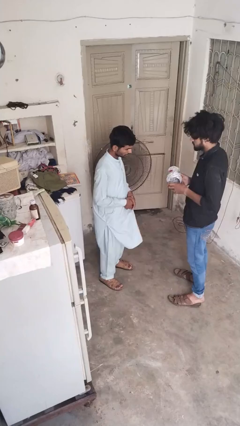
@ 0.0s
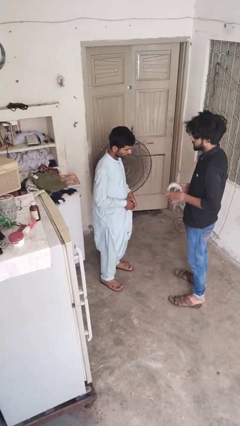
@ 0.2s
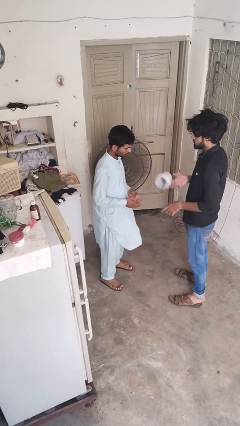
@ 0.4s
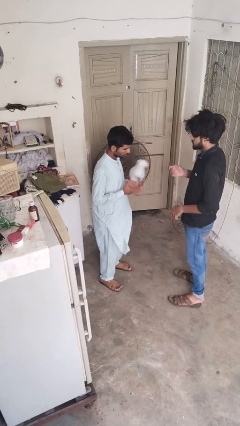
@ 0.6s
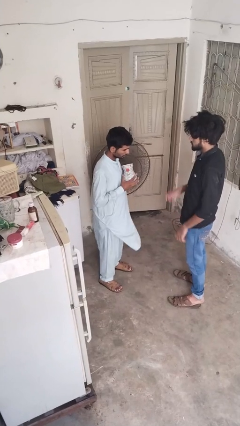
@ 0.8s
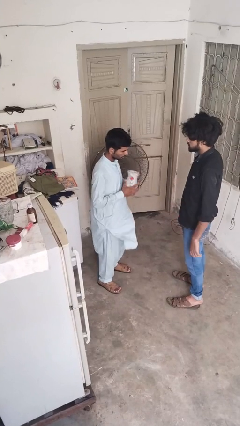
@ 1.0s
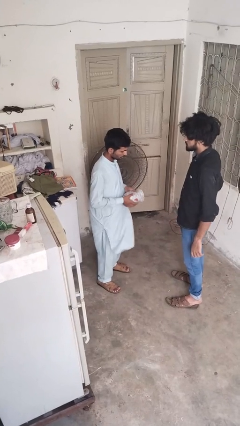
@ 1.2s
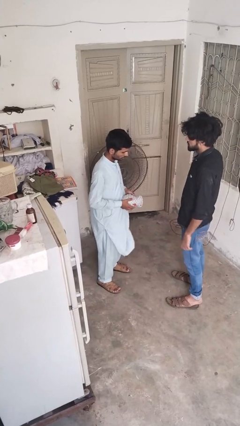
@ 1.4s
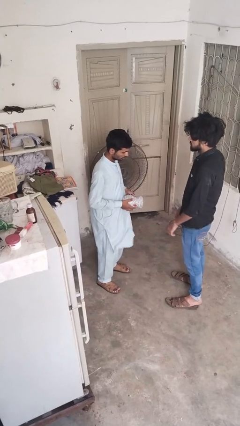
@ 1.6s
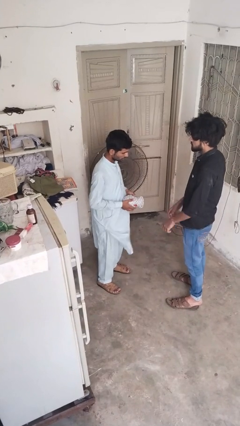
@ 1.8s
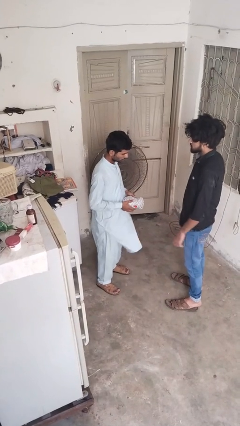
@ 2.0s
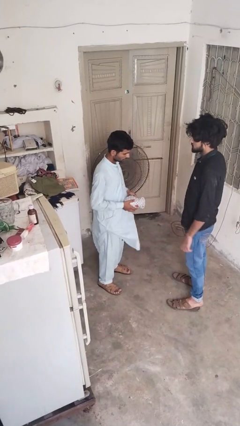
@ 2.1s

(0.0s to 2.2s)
person catches object from person

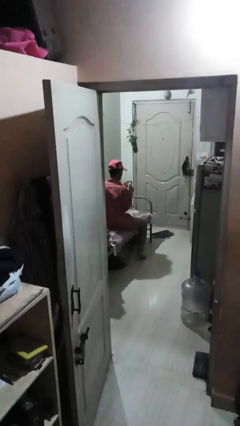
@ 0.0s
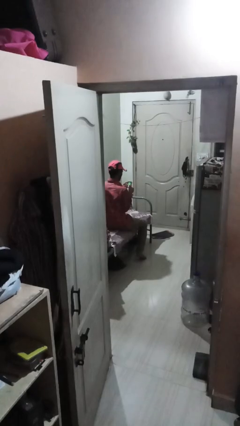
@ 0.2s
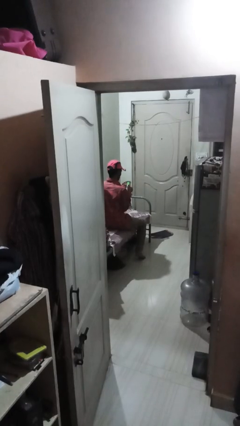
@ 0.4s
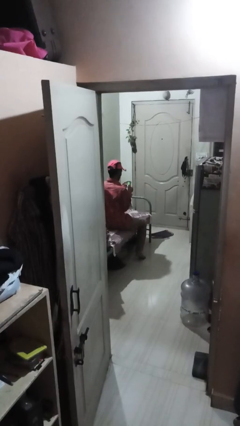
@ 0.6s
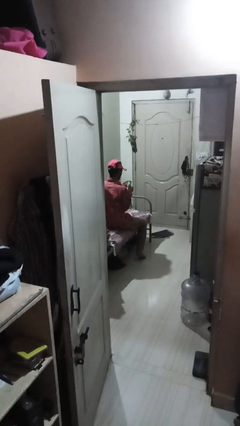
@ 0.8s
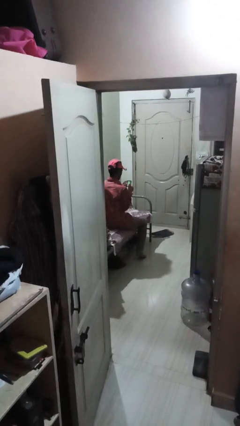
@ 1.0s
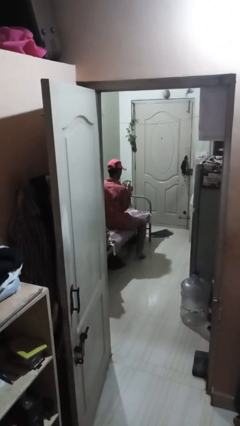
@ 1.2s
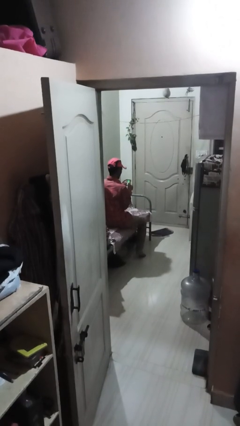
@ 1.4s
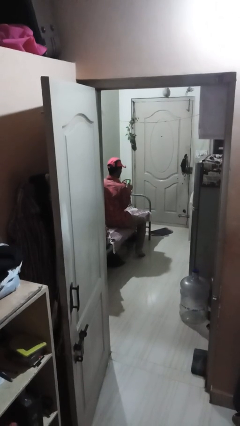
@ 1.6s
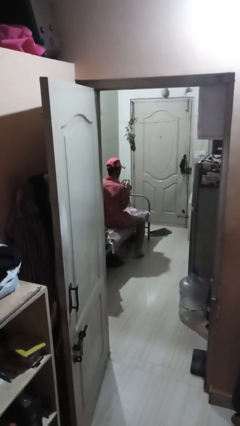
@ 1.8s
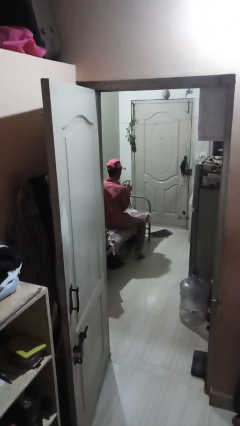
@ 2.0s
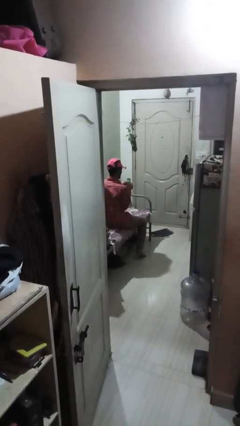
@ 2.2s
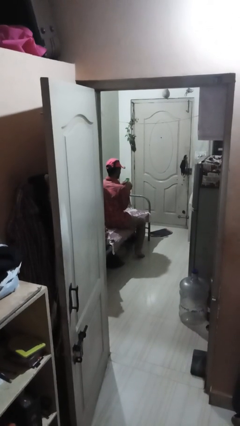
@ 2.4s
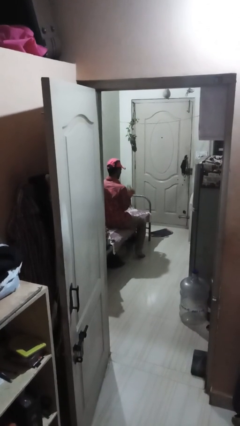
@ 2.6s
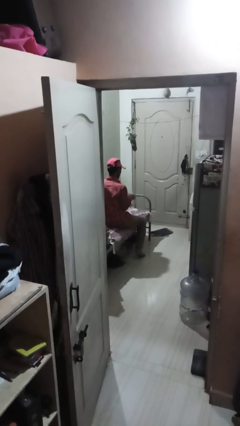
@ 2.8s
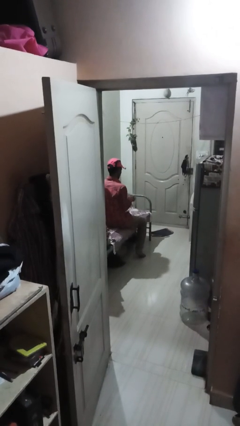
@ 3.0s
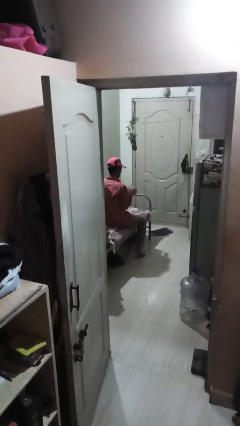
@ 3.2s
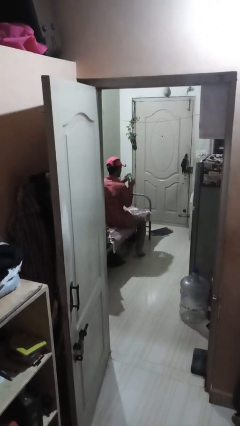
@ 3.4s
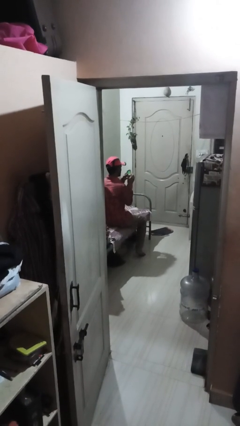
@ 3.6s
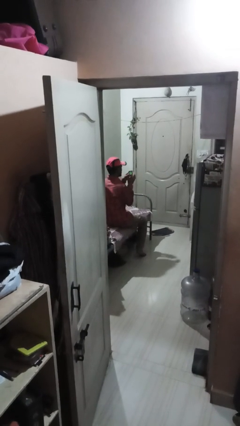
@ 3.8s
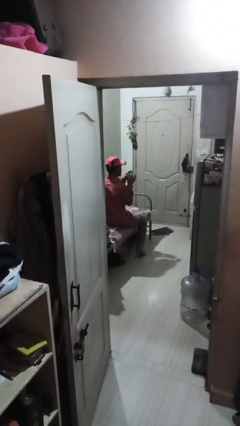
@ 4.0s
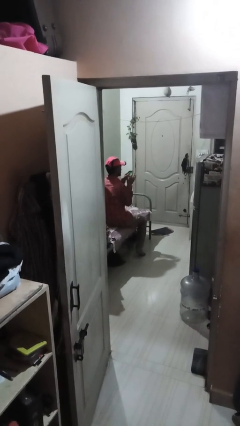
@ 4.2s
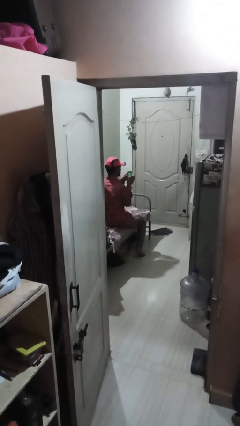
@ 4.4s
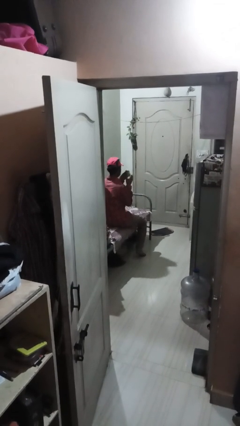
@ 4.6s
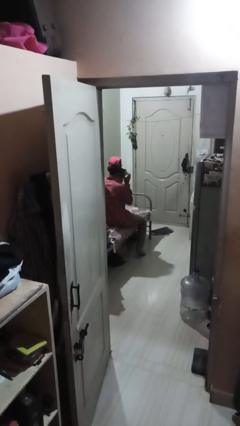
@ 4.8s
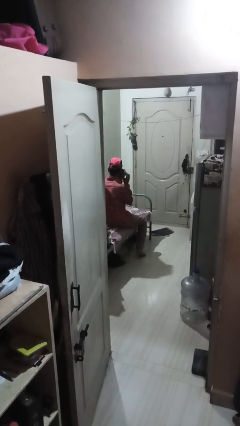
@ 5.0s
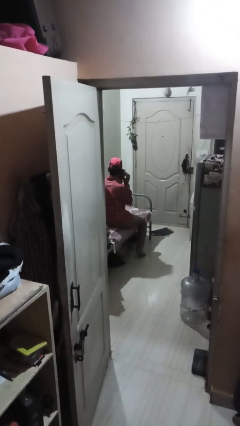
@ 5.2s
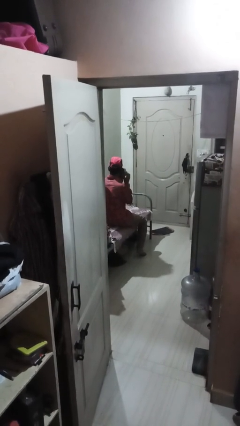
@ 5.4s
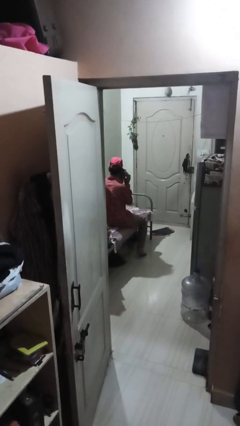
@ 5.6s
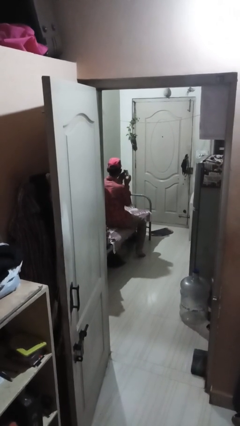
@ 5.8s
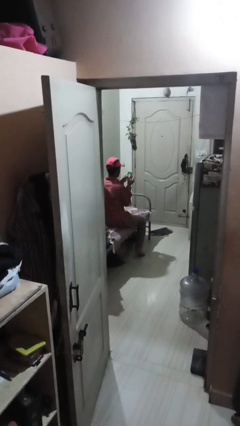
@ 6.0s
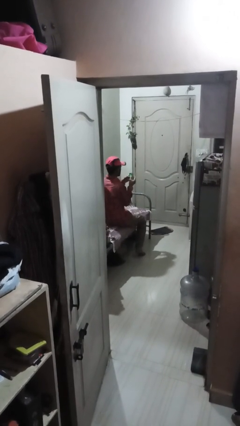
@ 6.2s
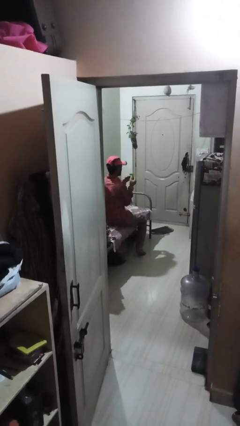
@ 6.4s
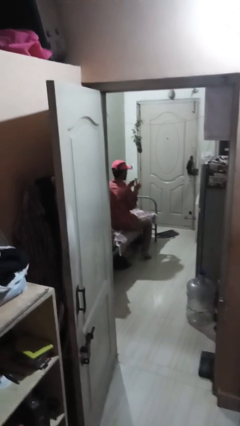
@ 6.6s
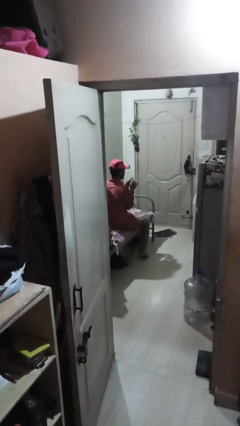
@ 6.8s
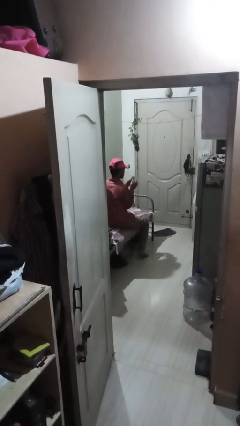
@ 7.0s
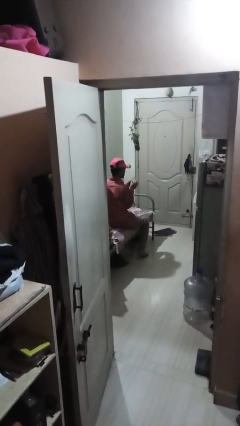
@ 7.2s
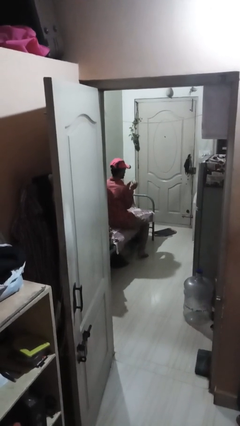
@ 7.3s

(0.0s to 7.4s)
person taps object with finger

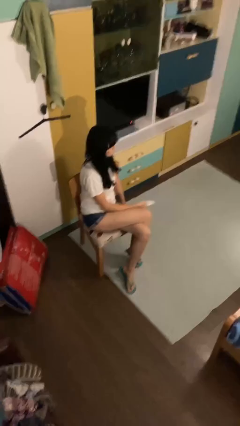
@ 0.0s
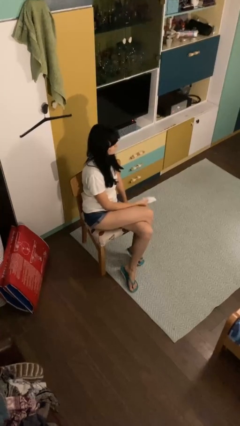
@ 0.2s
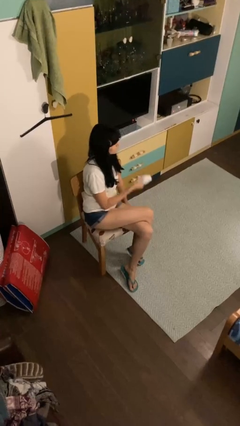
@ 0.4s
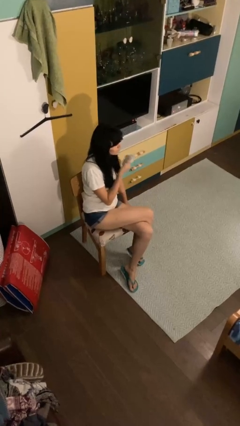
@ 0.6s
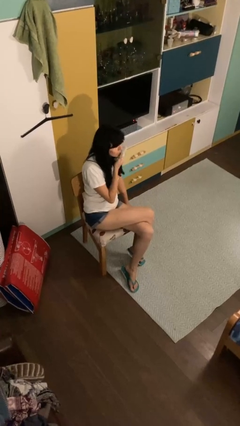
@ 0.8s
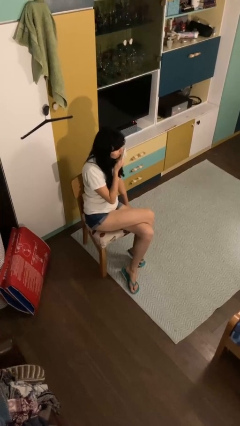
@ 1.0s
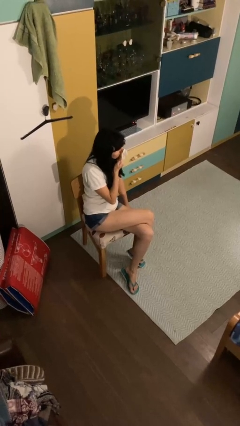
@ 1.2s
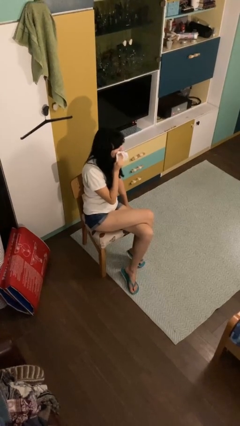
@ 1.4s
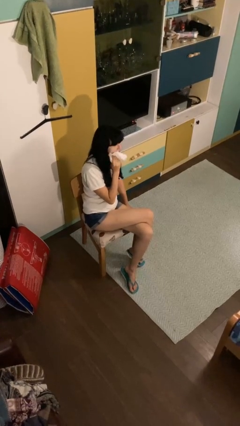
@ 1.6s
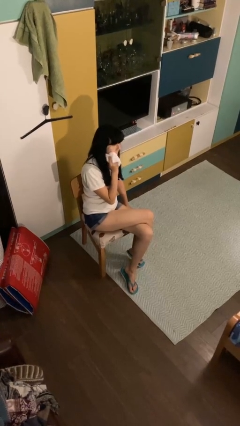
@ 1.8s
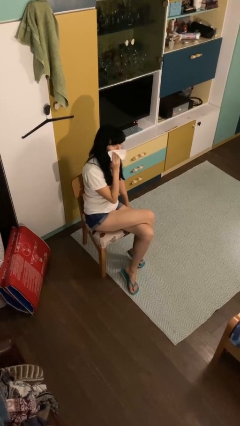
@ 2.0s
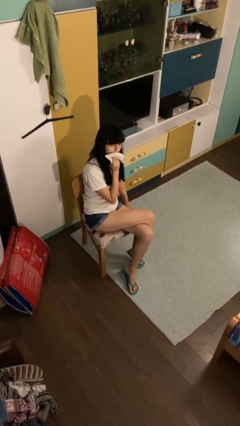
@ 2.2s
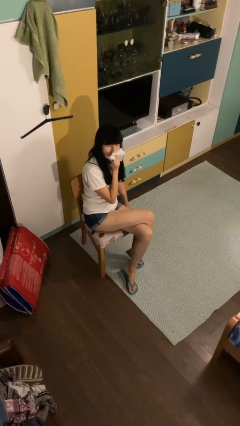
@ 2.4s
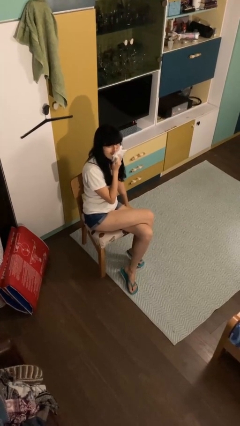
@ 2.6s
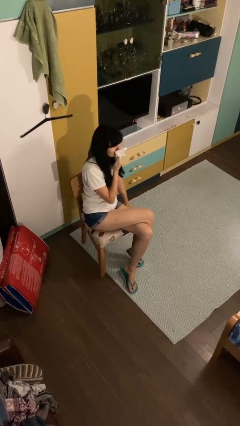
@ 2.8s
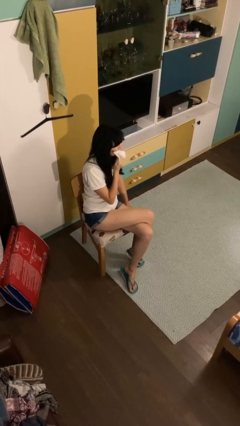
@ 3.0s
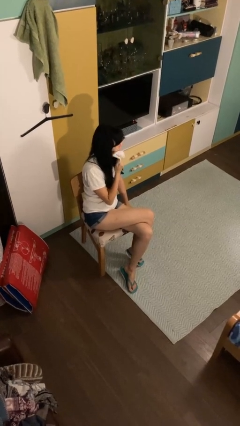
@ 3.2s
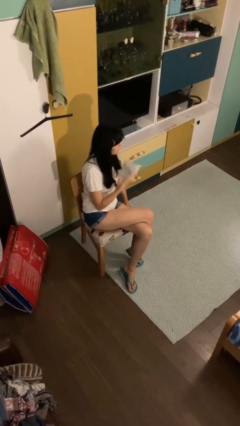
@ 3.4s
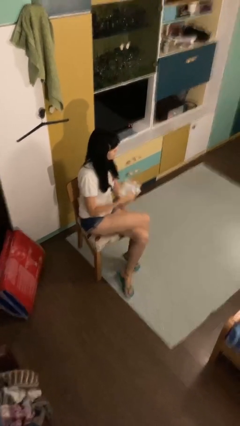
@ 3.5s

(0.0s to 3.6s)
person wipes mouth with napkin

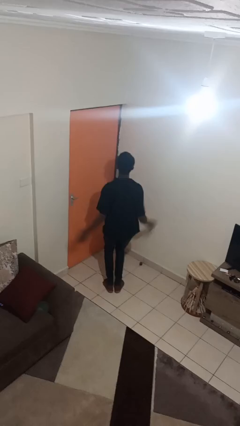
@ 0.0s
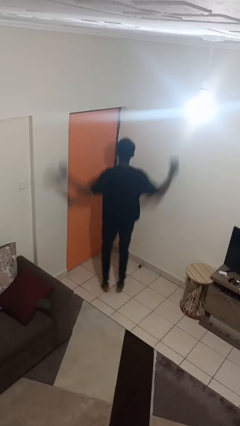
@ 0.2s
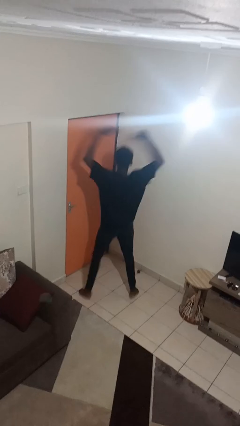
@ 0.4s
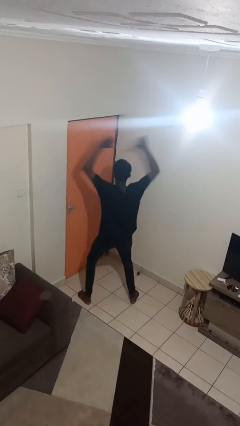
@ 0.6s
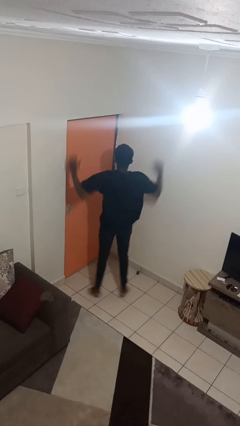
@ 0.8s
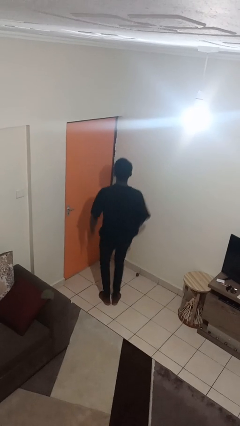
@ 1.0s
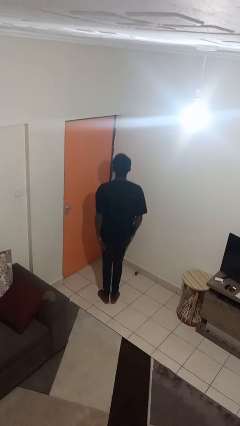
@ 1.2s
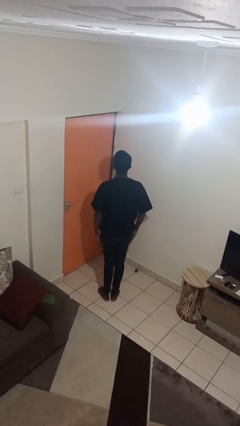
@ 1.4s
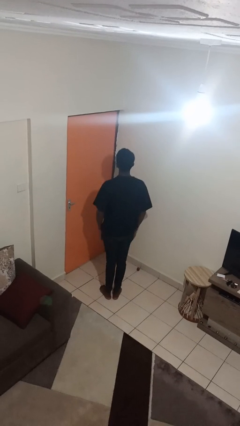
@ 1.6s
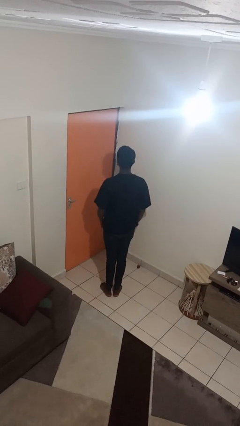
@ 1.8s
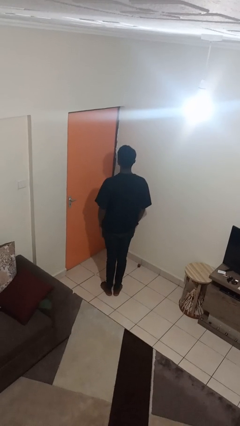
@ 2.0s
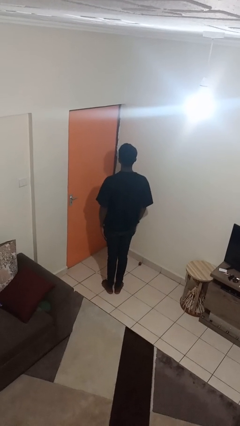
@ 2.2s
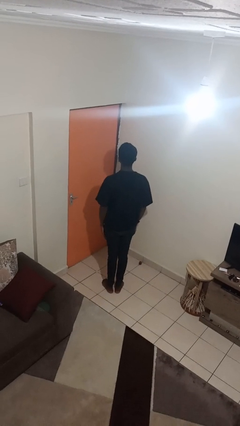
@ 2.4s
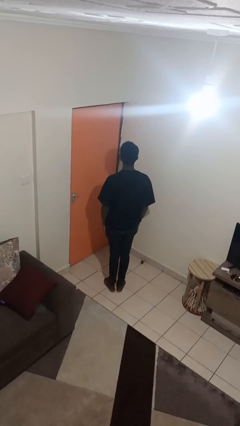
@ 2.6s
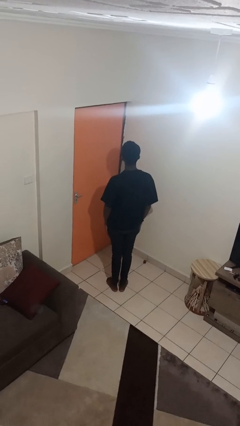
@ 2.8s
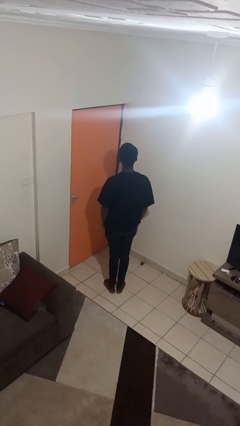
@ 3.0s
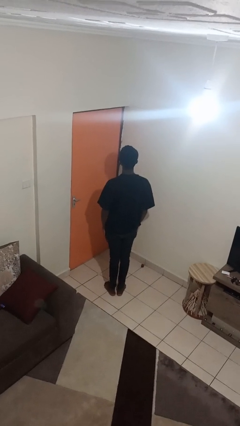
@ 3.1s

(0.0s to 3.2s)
person exercises with jumping jacks

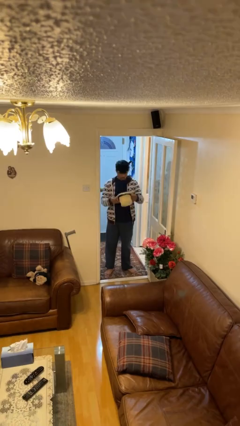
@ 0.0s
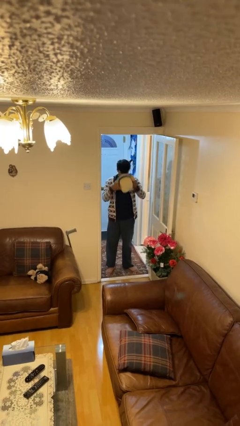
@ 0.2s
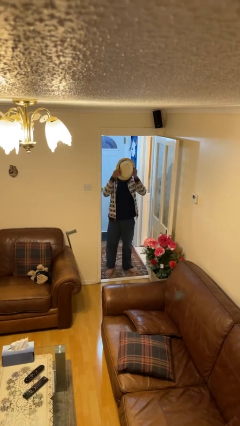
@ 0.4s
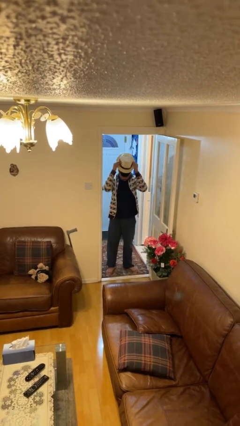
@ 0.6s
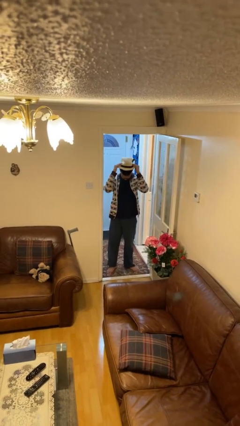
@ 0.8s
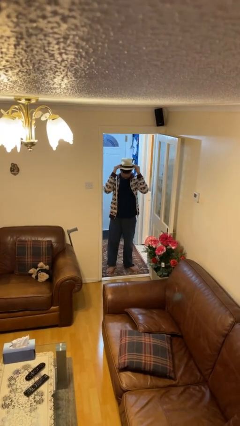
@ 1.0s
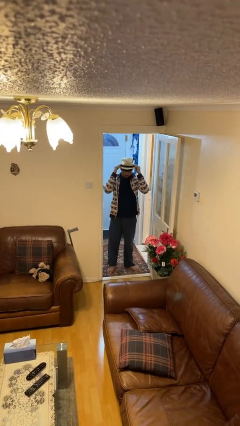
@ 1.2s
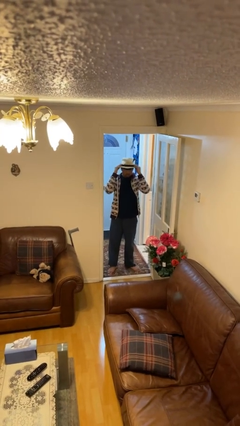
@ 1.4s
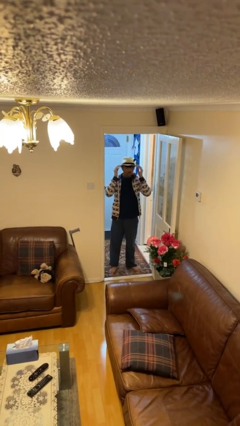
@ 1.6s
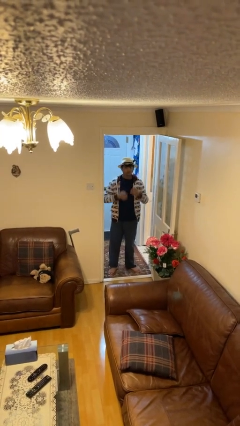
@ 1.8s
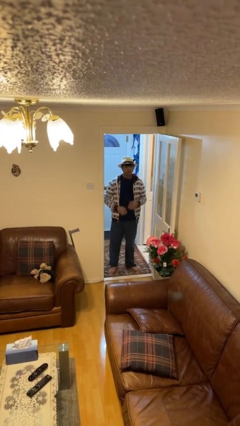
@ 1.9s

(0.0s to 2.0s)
person puts on hat
